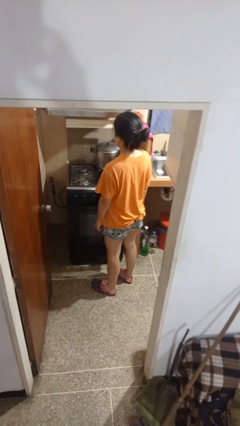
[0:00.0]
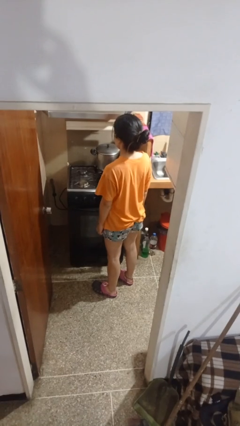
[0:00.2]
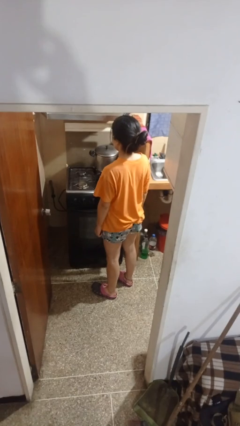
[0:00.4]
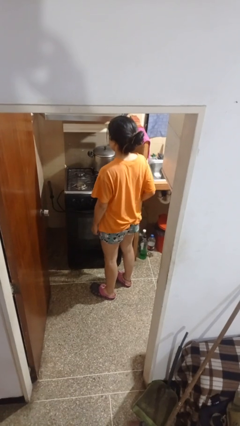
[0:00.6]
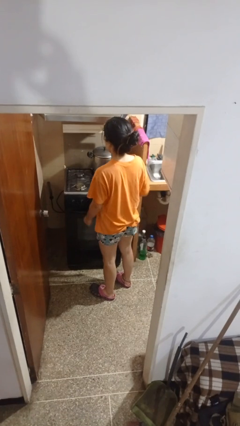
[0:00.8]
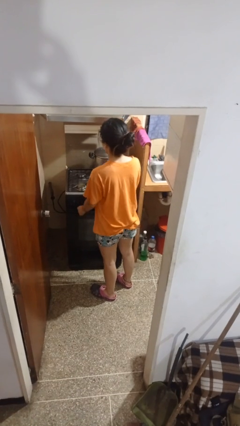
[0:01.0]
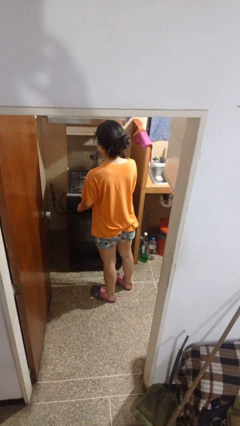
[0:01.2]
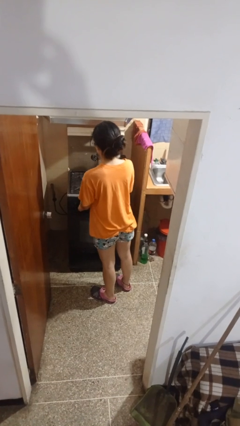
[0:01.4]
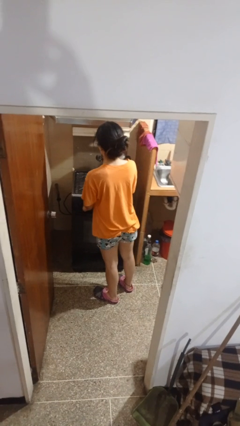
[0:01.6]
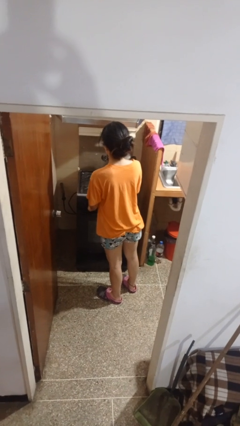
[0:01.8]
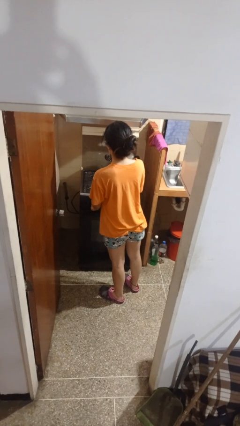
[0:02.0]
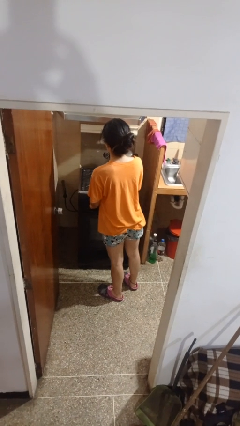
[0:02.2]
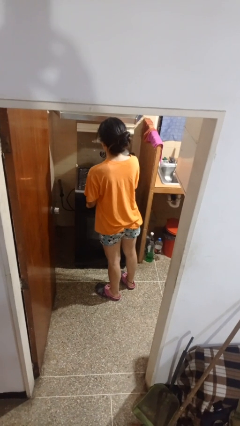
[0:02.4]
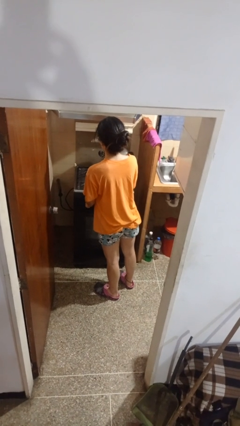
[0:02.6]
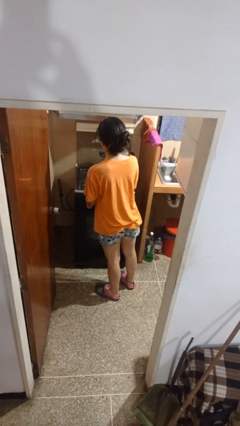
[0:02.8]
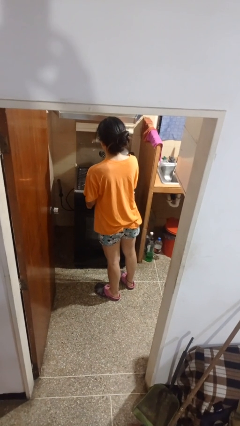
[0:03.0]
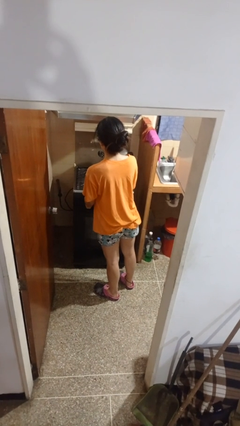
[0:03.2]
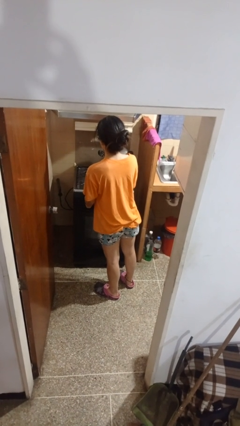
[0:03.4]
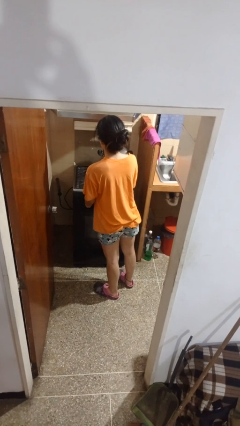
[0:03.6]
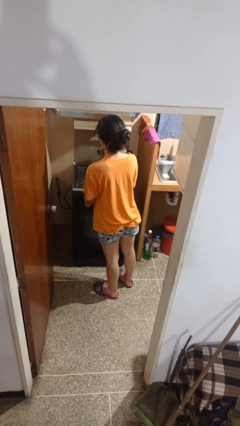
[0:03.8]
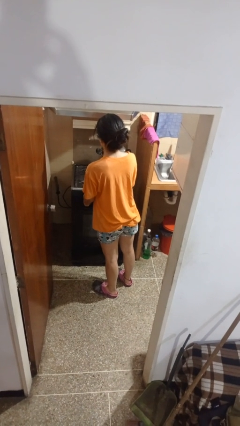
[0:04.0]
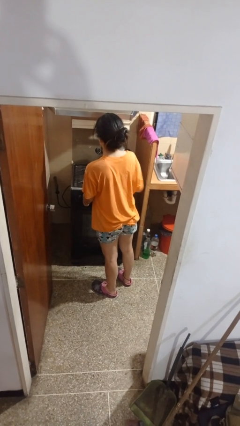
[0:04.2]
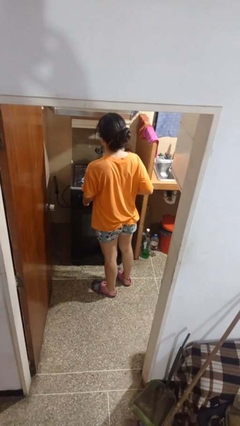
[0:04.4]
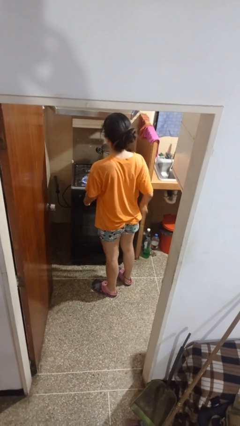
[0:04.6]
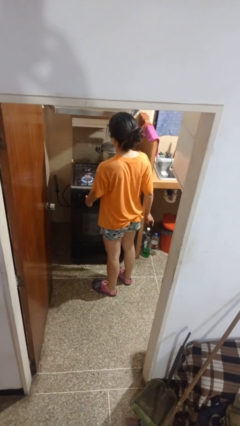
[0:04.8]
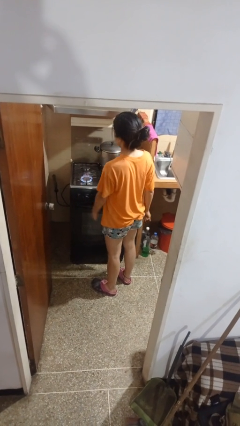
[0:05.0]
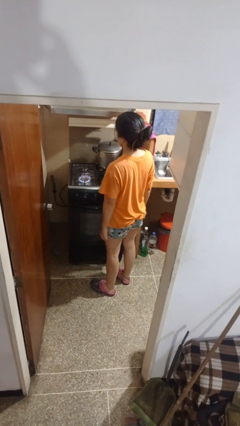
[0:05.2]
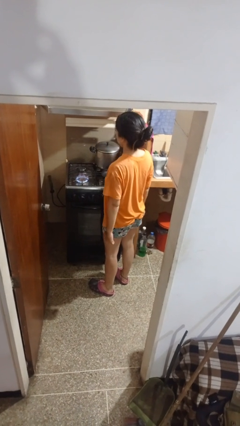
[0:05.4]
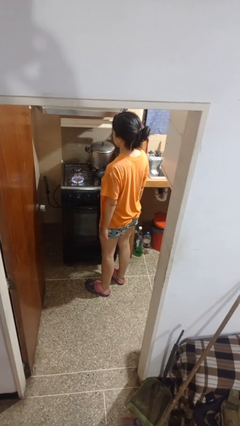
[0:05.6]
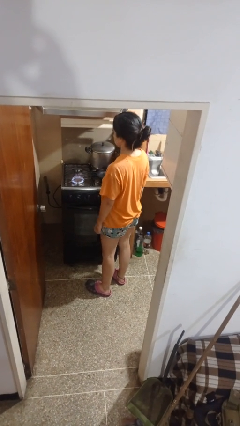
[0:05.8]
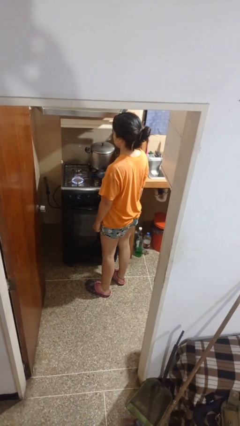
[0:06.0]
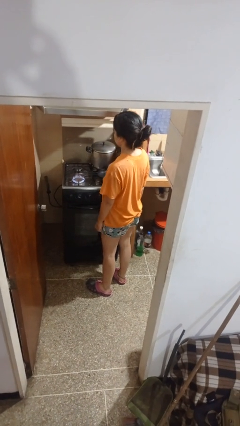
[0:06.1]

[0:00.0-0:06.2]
person turns on stovetop

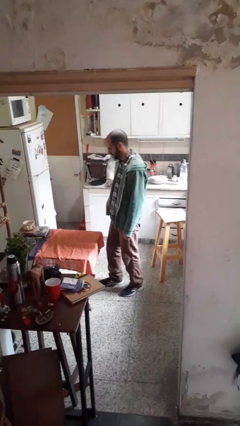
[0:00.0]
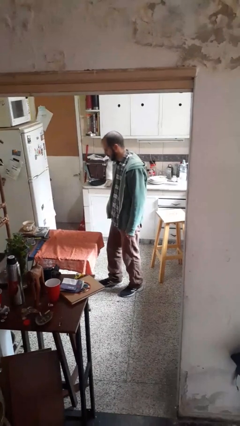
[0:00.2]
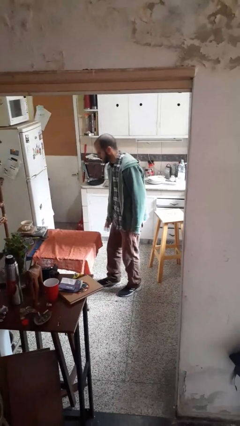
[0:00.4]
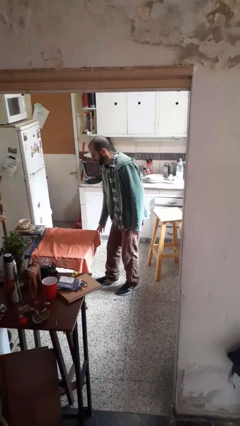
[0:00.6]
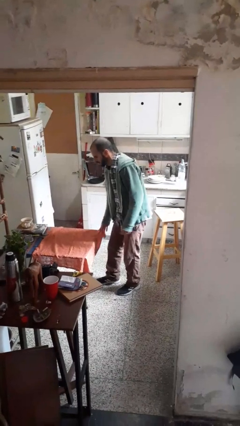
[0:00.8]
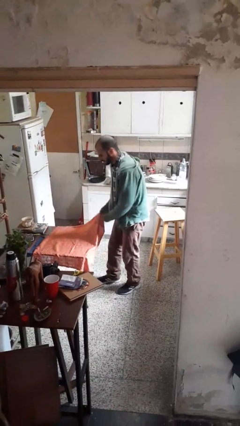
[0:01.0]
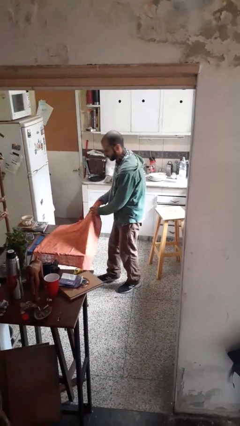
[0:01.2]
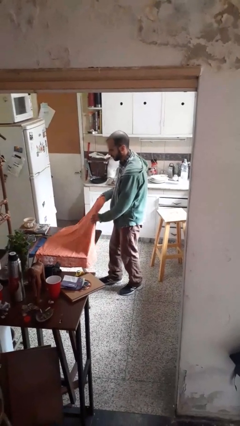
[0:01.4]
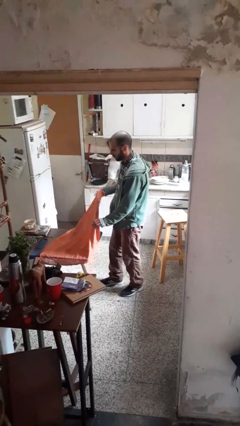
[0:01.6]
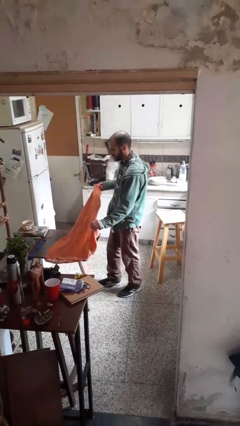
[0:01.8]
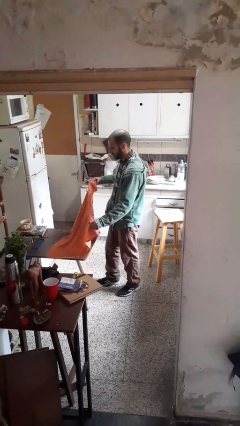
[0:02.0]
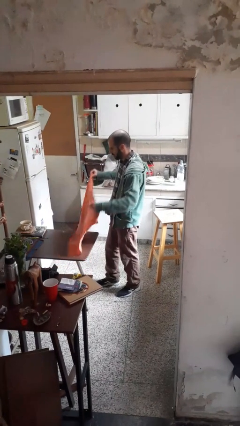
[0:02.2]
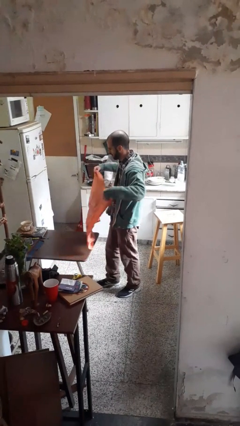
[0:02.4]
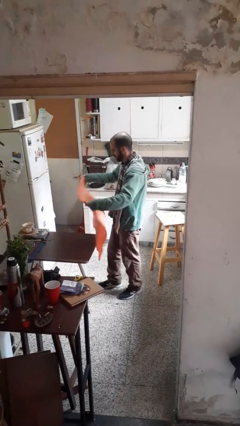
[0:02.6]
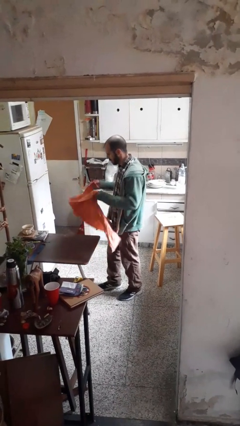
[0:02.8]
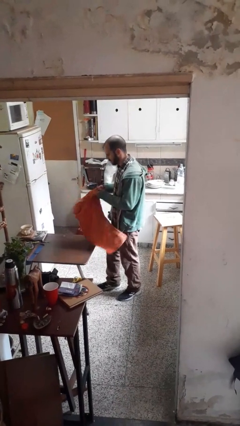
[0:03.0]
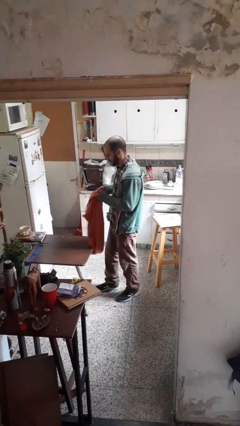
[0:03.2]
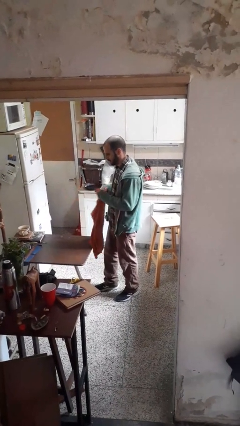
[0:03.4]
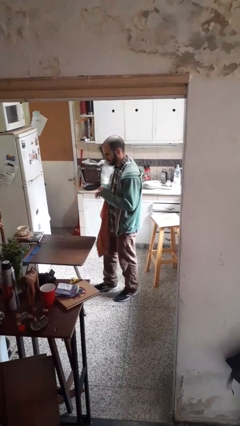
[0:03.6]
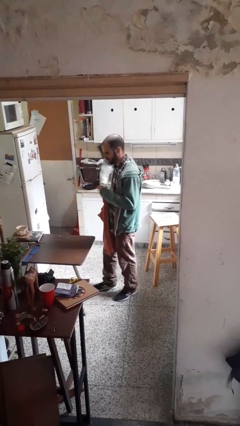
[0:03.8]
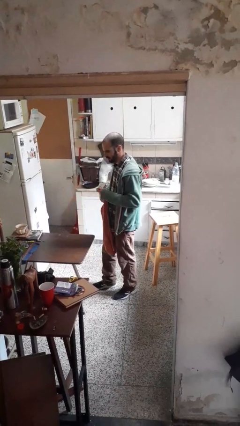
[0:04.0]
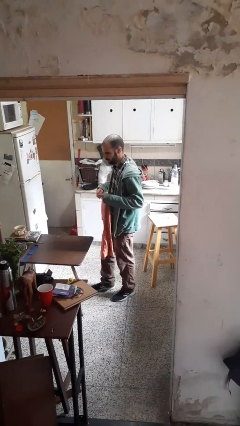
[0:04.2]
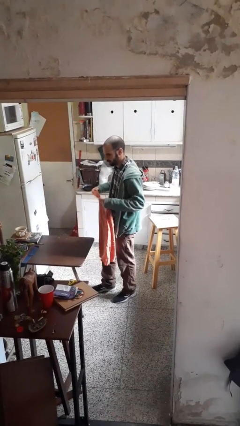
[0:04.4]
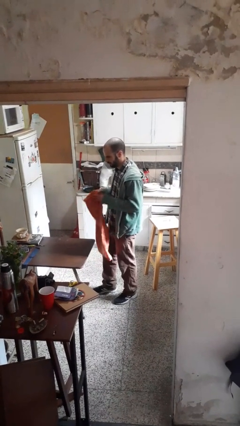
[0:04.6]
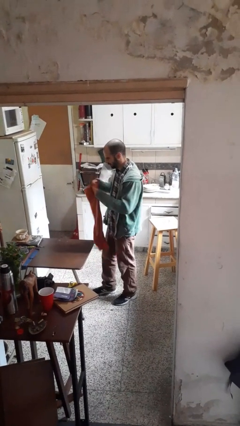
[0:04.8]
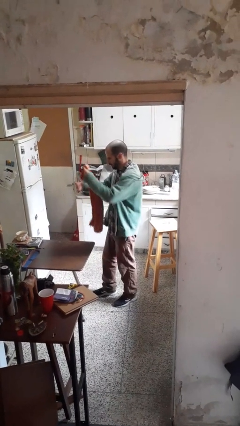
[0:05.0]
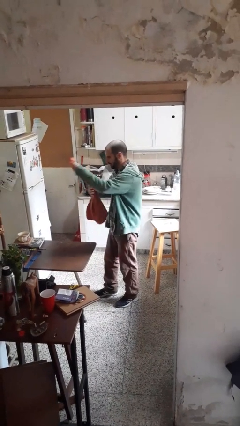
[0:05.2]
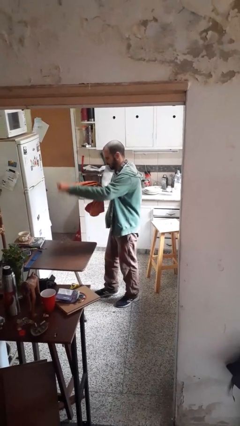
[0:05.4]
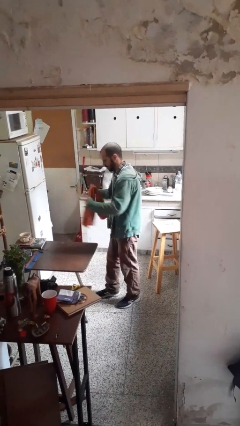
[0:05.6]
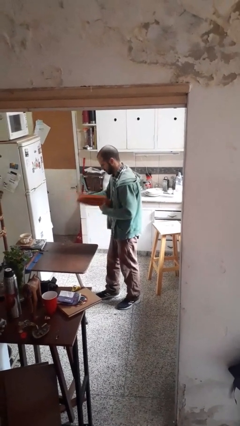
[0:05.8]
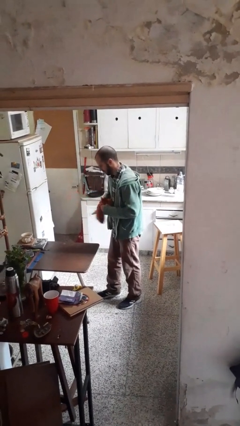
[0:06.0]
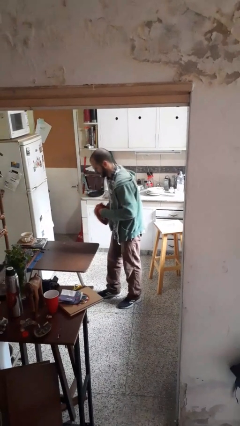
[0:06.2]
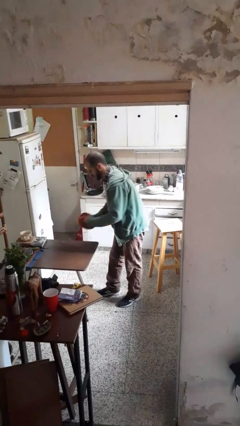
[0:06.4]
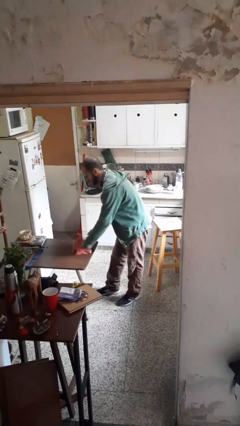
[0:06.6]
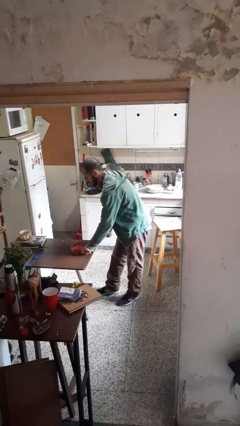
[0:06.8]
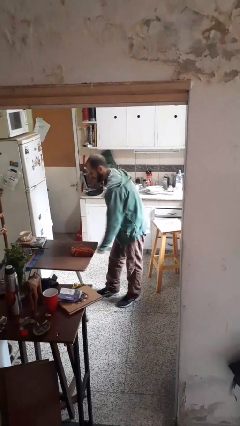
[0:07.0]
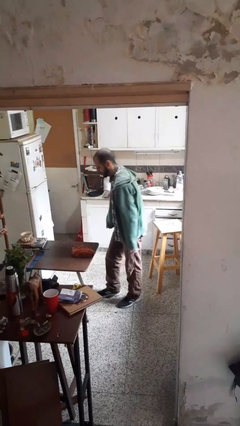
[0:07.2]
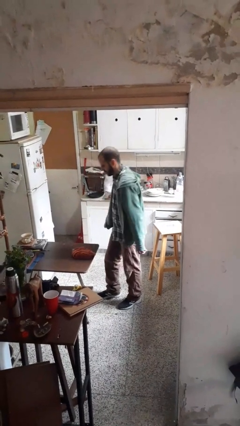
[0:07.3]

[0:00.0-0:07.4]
person folds tablecloth

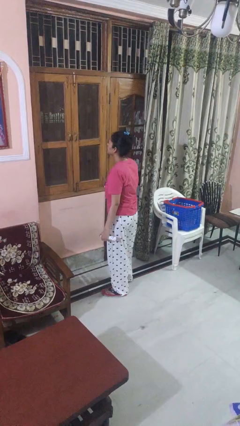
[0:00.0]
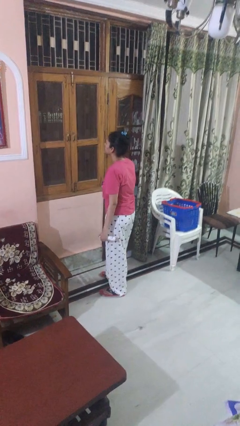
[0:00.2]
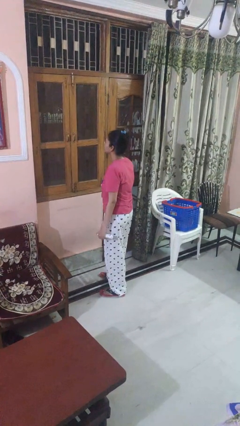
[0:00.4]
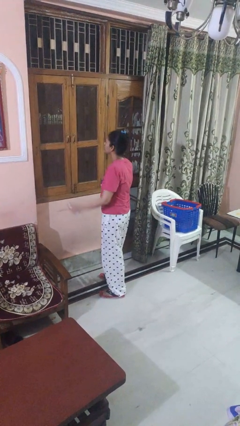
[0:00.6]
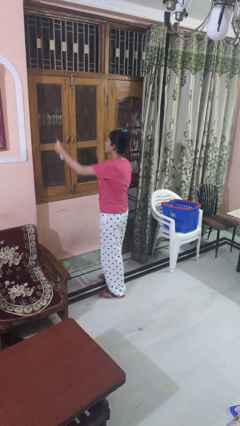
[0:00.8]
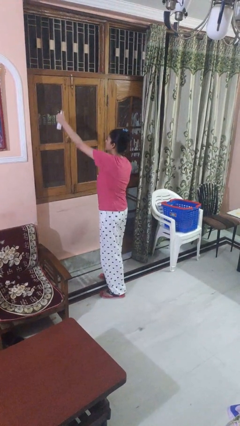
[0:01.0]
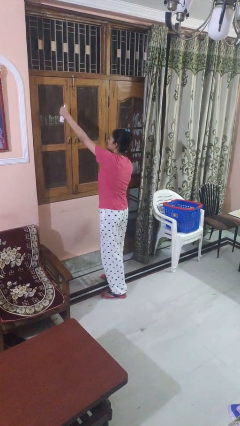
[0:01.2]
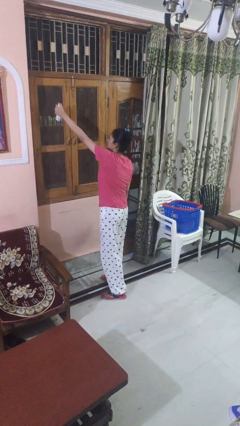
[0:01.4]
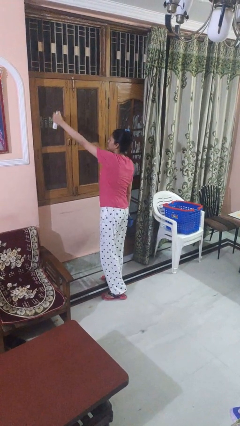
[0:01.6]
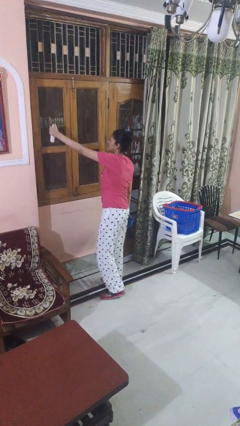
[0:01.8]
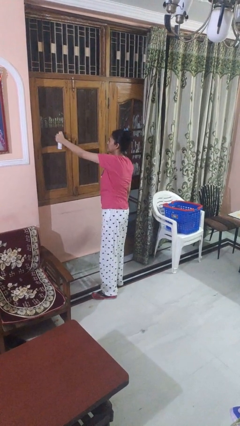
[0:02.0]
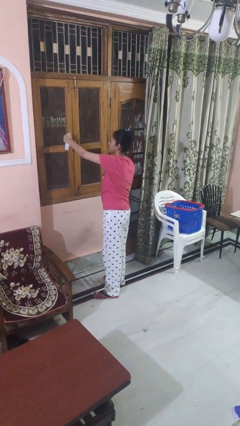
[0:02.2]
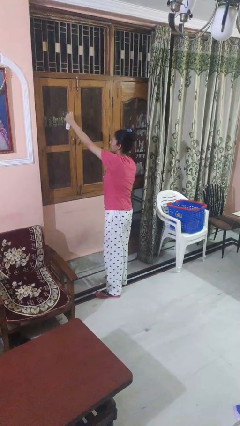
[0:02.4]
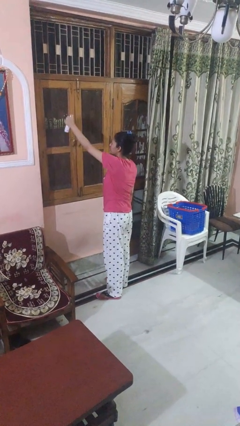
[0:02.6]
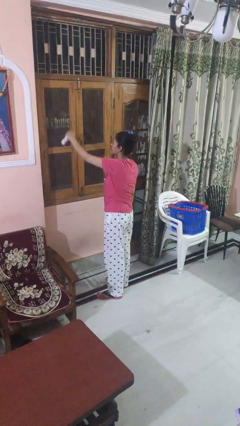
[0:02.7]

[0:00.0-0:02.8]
person sprays from bottle

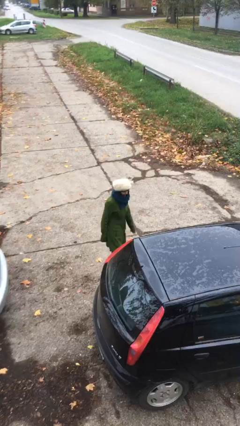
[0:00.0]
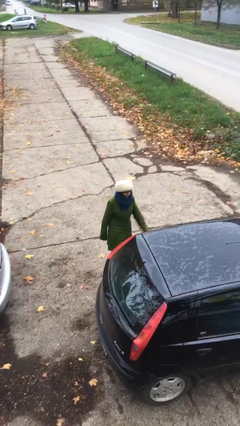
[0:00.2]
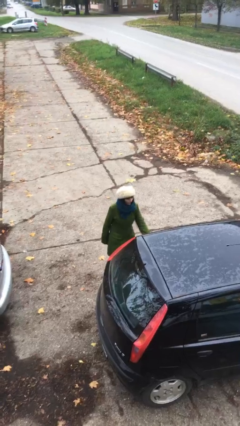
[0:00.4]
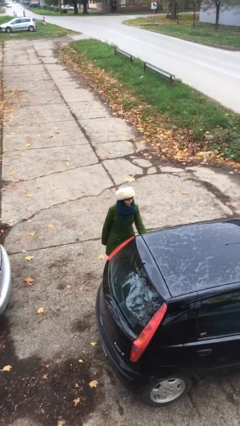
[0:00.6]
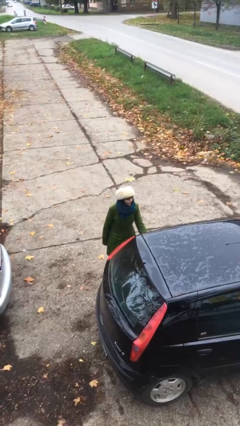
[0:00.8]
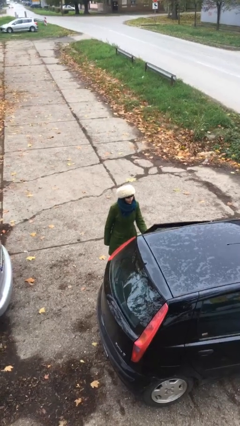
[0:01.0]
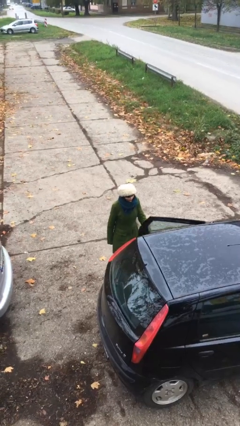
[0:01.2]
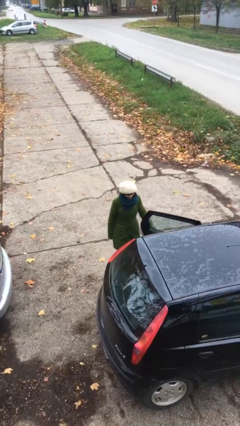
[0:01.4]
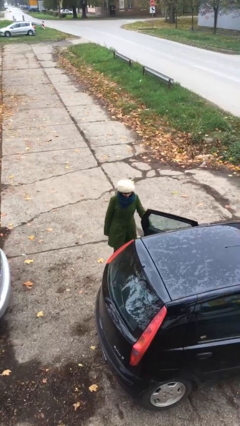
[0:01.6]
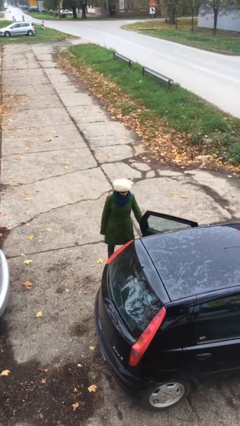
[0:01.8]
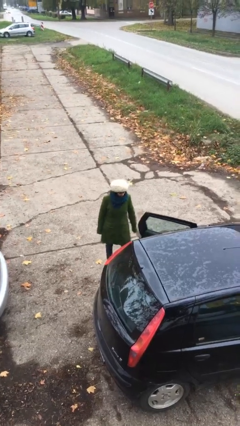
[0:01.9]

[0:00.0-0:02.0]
person opens car door
